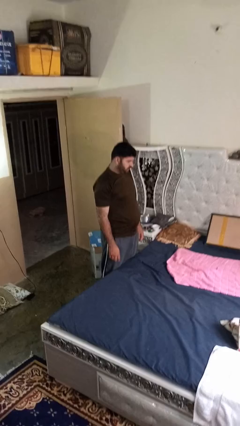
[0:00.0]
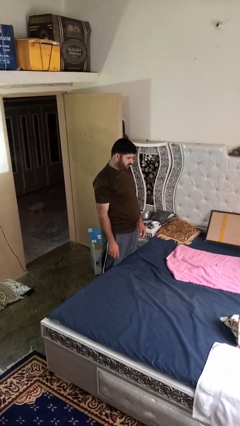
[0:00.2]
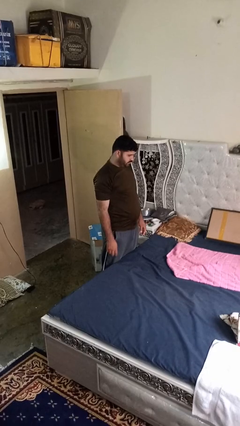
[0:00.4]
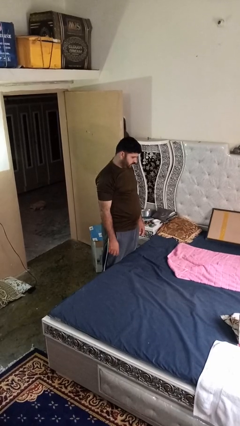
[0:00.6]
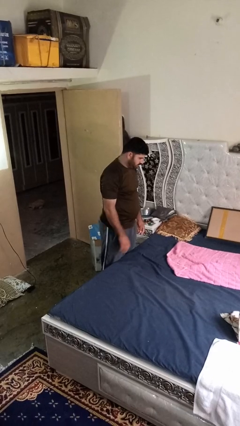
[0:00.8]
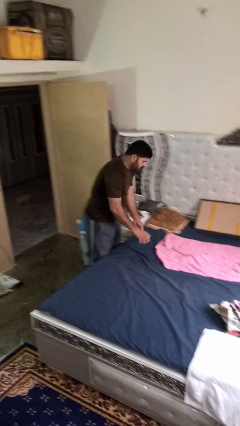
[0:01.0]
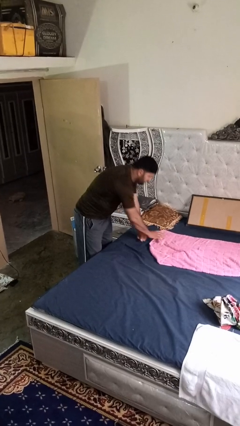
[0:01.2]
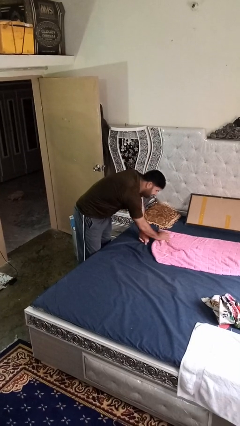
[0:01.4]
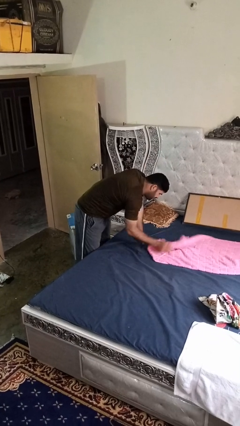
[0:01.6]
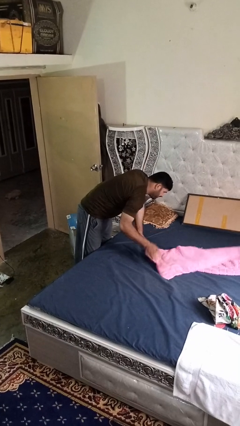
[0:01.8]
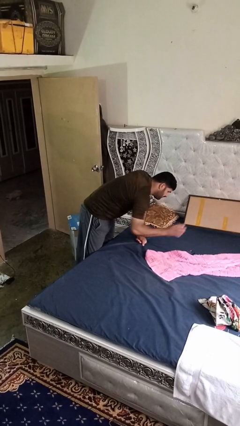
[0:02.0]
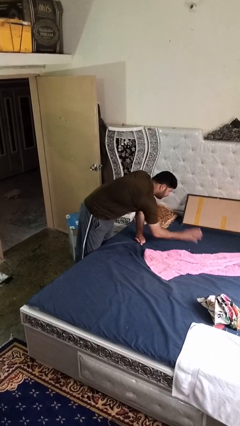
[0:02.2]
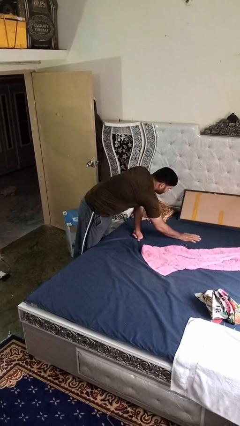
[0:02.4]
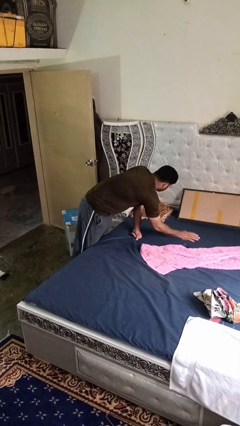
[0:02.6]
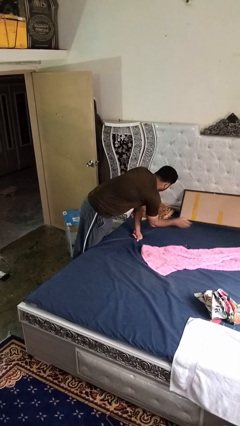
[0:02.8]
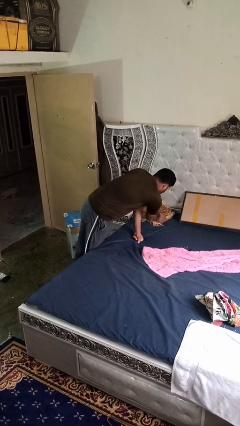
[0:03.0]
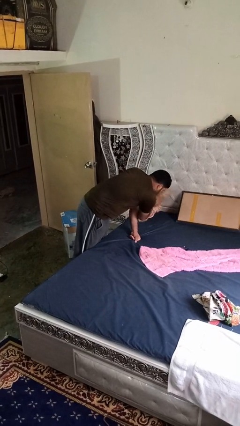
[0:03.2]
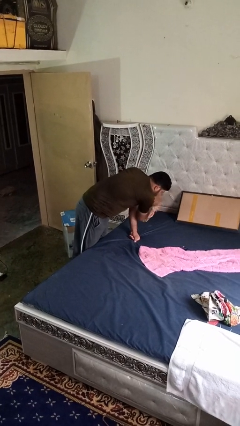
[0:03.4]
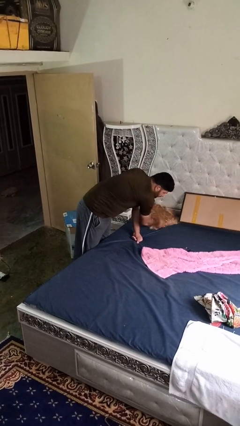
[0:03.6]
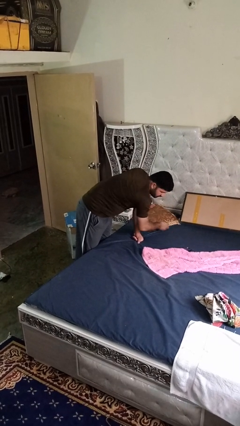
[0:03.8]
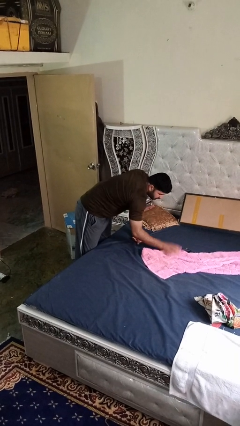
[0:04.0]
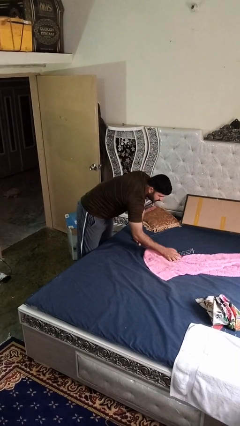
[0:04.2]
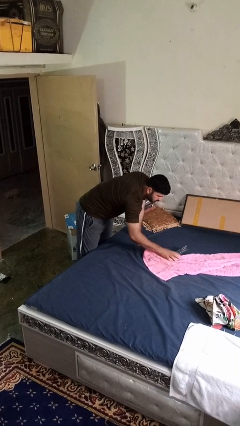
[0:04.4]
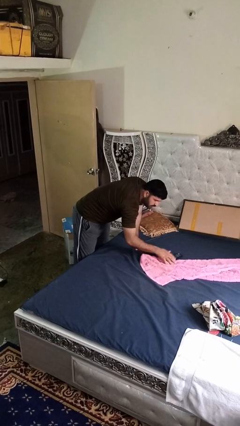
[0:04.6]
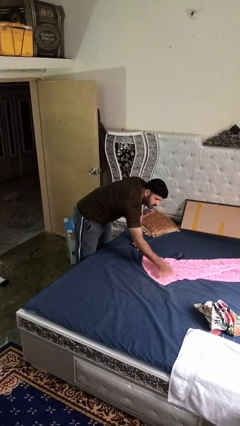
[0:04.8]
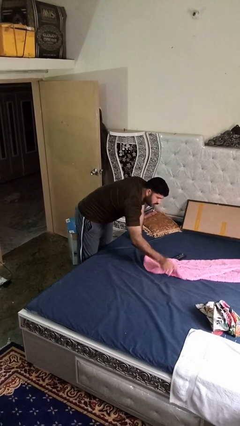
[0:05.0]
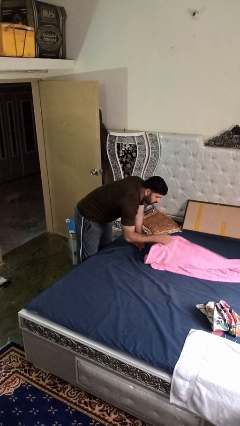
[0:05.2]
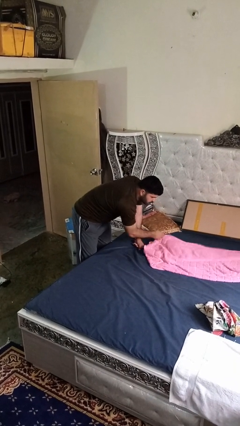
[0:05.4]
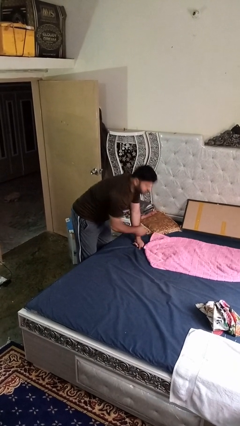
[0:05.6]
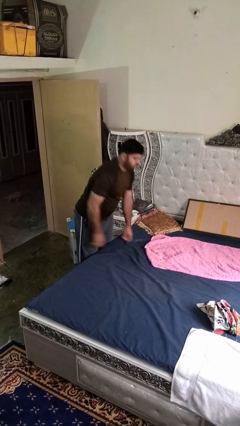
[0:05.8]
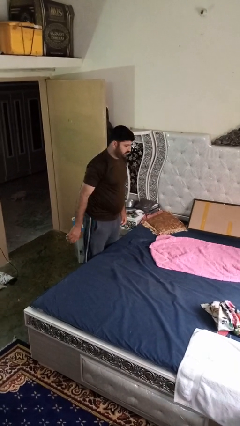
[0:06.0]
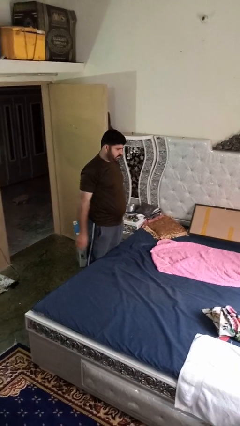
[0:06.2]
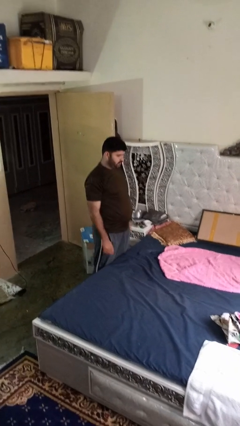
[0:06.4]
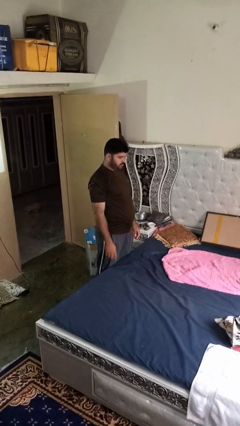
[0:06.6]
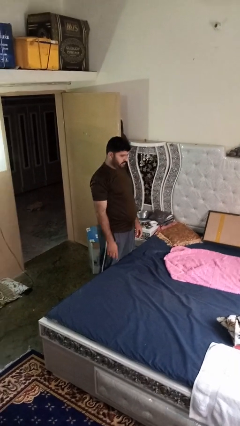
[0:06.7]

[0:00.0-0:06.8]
person searches under bed

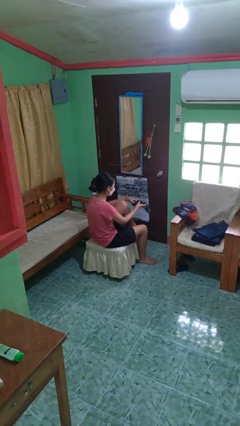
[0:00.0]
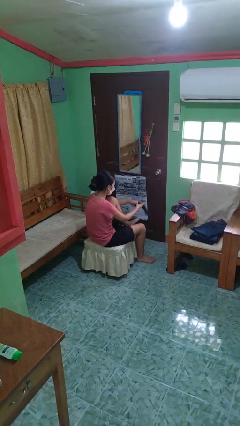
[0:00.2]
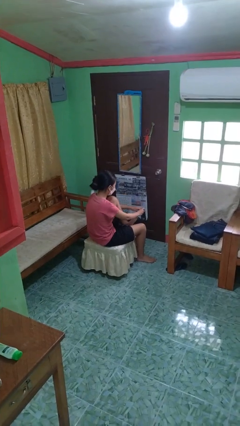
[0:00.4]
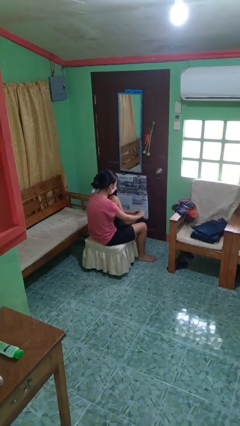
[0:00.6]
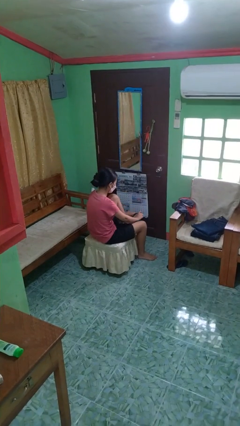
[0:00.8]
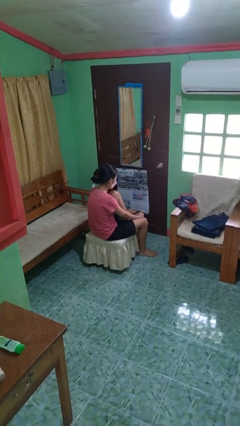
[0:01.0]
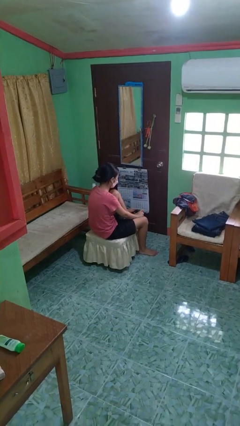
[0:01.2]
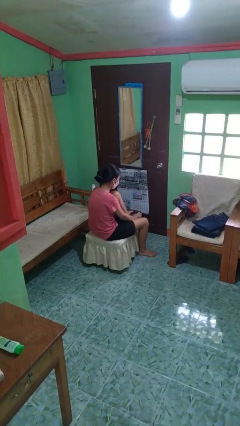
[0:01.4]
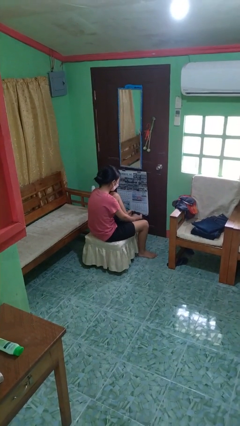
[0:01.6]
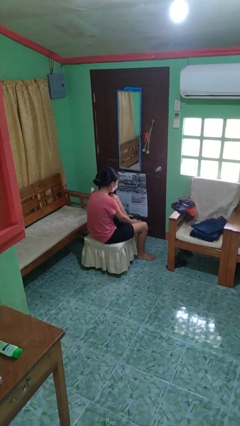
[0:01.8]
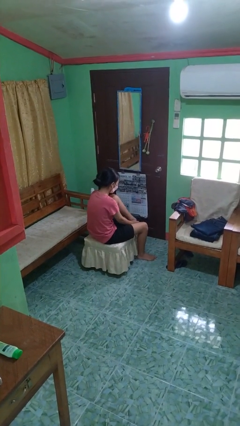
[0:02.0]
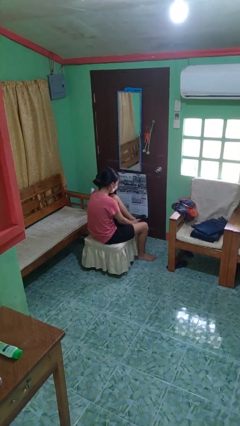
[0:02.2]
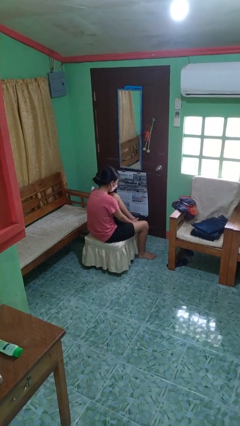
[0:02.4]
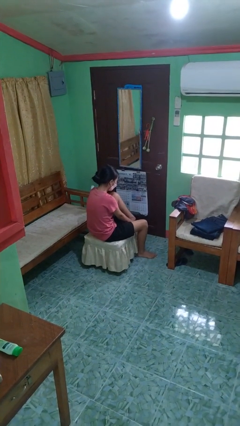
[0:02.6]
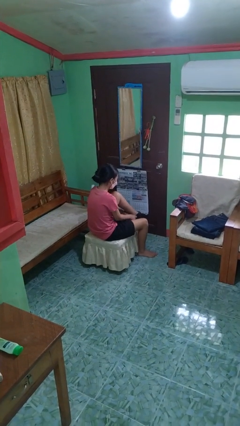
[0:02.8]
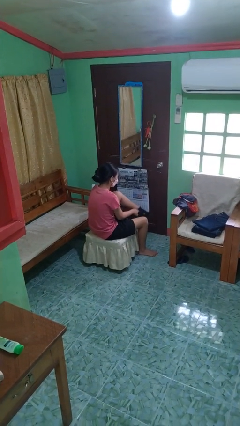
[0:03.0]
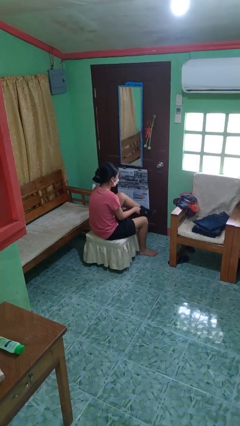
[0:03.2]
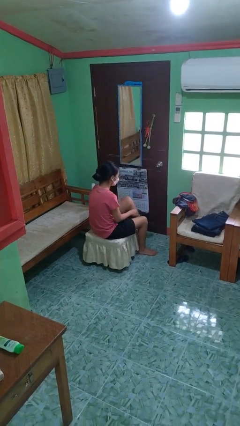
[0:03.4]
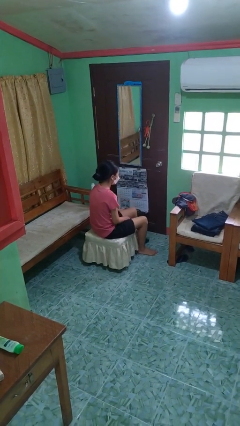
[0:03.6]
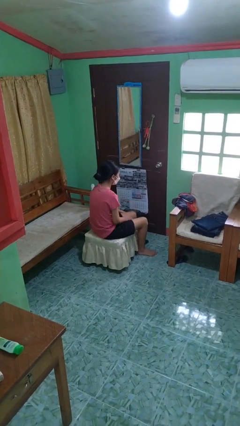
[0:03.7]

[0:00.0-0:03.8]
person puts on socks

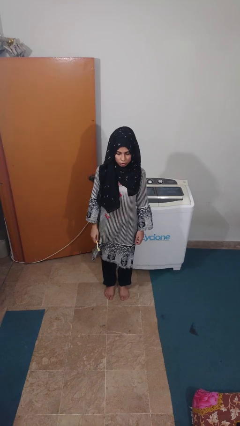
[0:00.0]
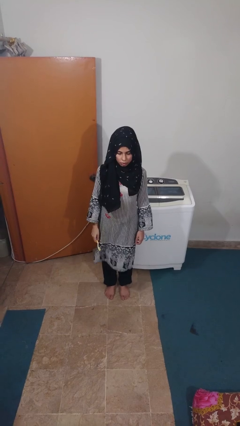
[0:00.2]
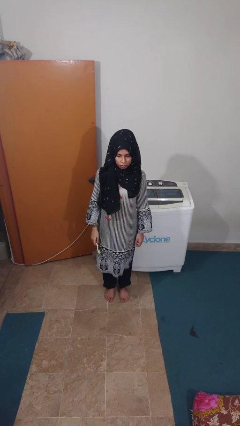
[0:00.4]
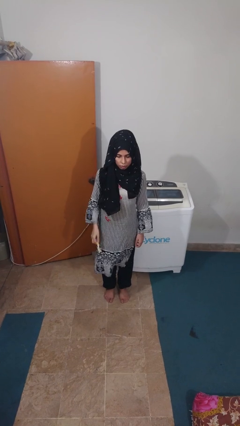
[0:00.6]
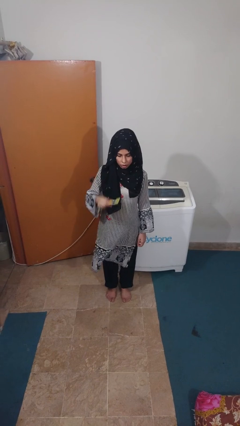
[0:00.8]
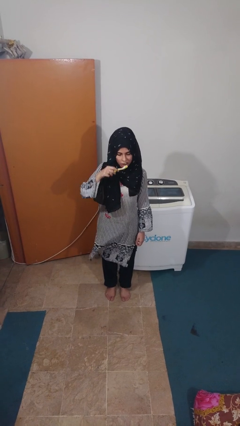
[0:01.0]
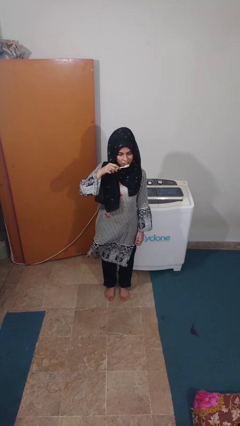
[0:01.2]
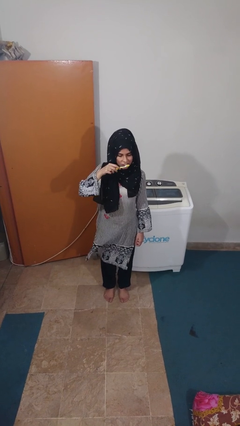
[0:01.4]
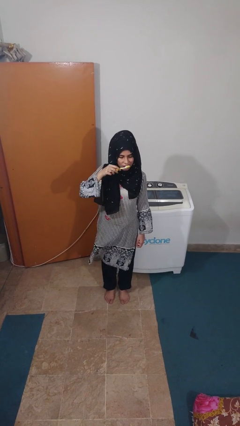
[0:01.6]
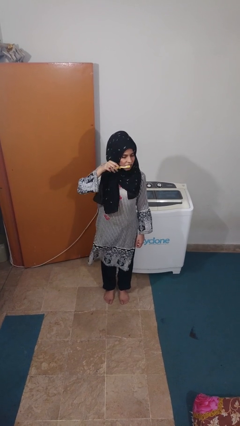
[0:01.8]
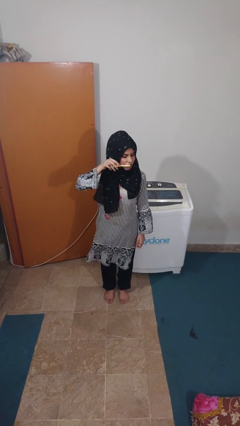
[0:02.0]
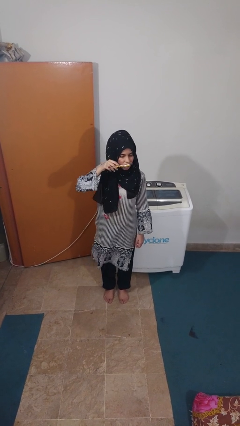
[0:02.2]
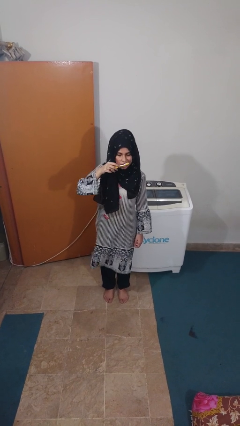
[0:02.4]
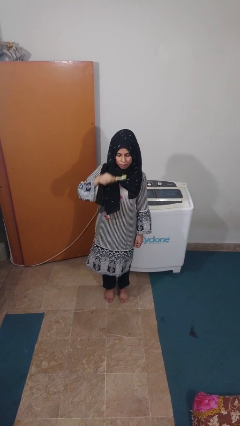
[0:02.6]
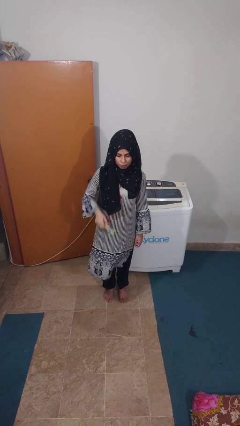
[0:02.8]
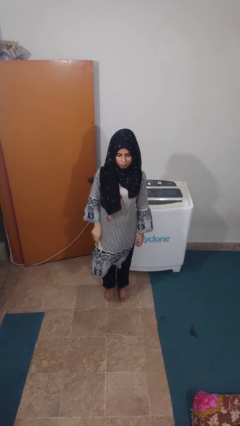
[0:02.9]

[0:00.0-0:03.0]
person brushes teeth

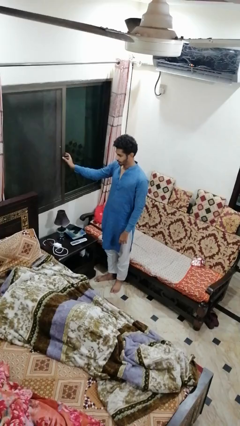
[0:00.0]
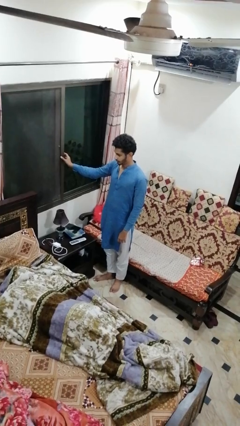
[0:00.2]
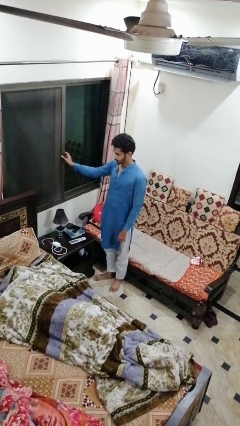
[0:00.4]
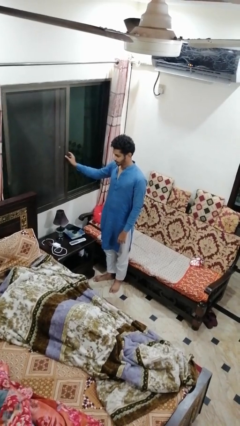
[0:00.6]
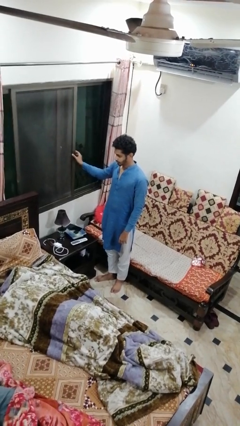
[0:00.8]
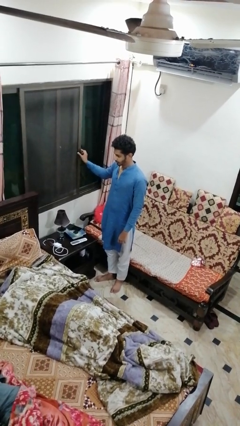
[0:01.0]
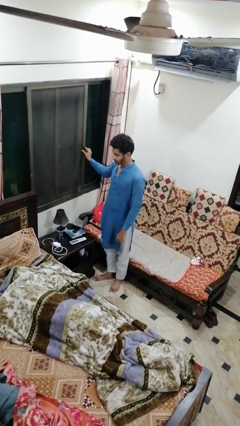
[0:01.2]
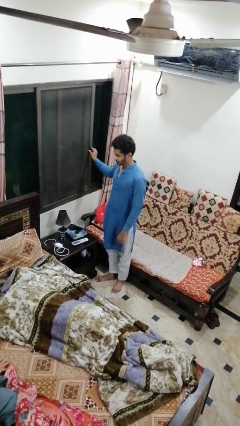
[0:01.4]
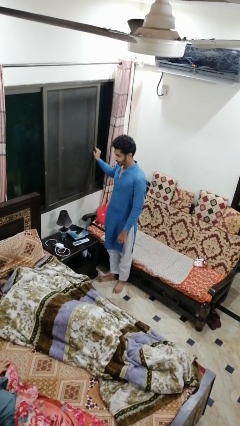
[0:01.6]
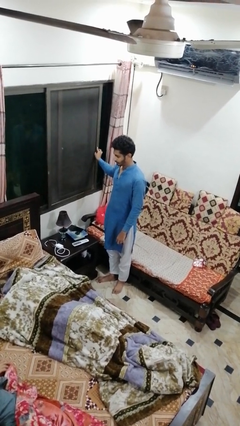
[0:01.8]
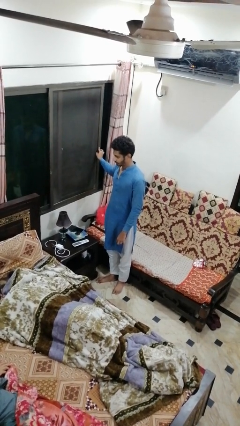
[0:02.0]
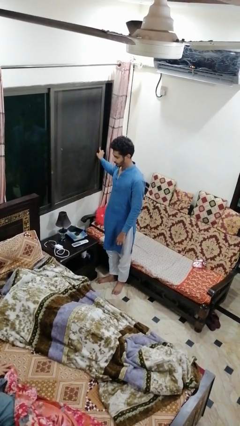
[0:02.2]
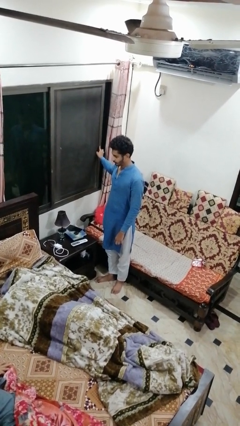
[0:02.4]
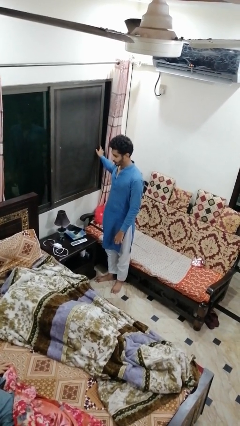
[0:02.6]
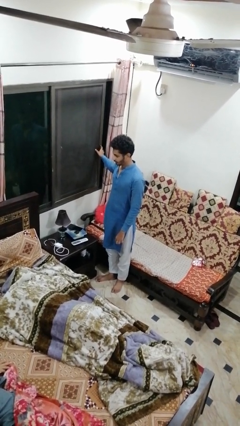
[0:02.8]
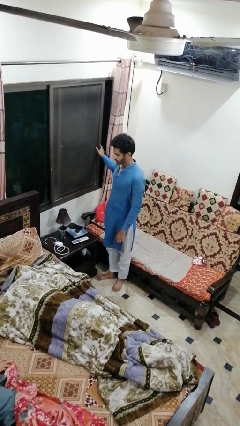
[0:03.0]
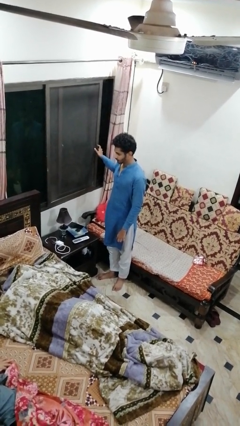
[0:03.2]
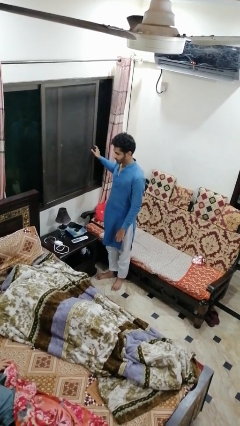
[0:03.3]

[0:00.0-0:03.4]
person opens home window

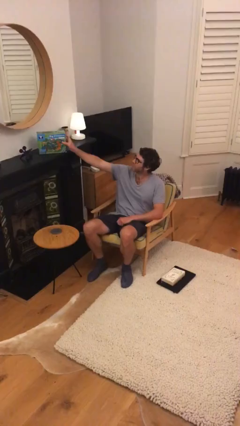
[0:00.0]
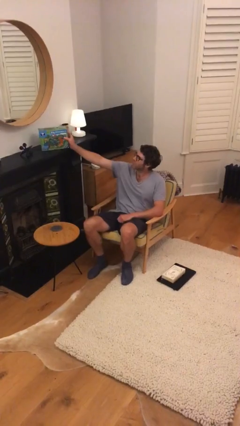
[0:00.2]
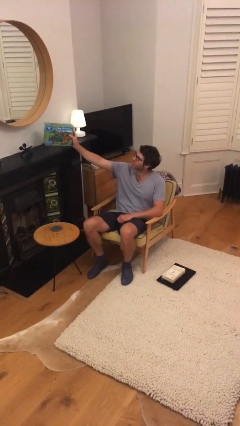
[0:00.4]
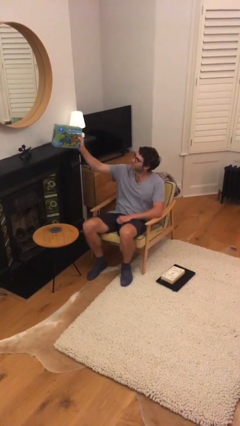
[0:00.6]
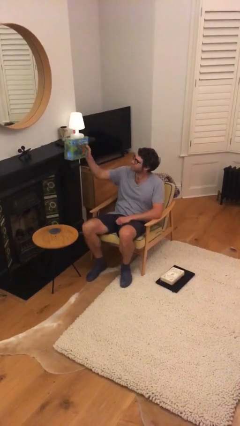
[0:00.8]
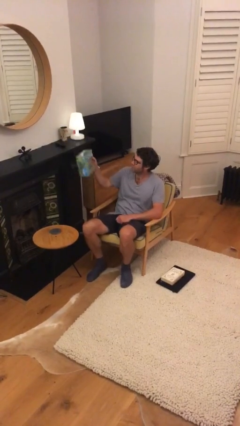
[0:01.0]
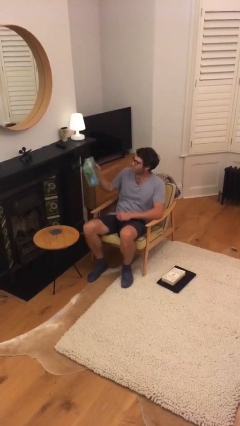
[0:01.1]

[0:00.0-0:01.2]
person picks up object from shelf
